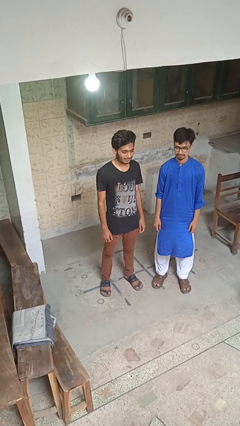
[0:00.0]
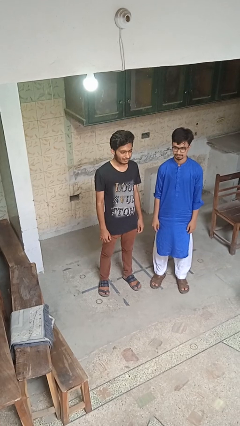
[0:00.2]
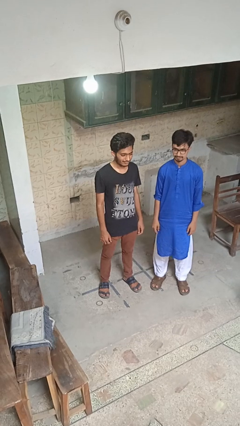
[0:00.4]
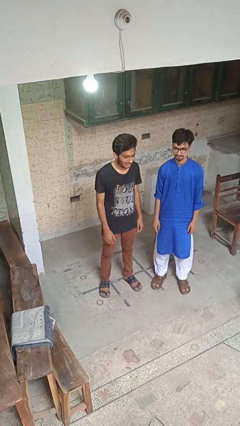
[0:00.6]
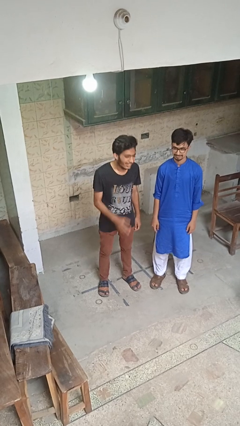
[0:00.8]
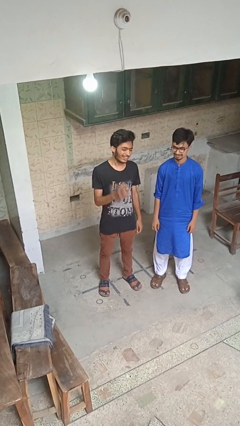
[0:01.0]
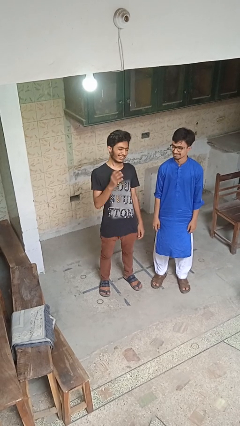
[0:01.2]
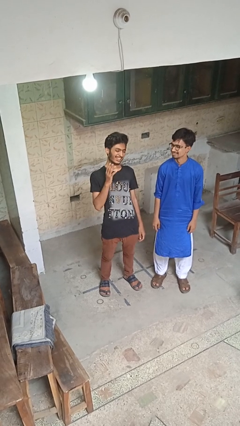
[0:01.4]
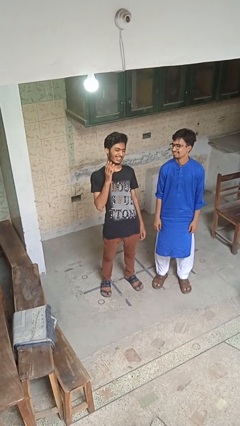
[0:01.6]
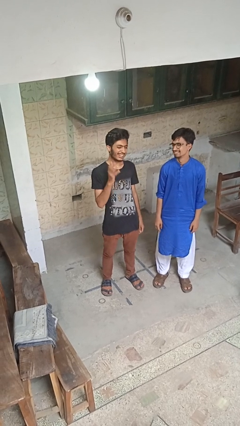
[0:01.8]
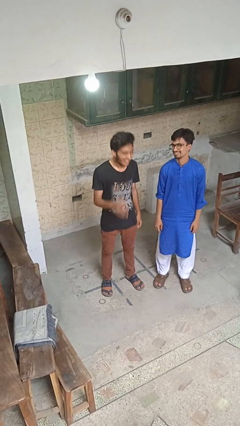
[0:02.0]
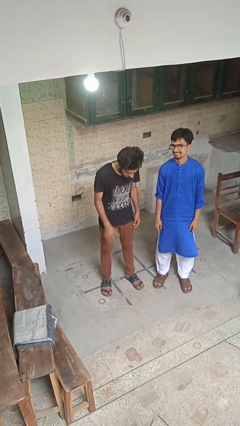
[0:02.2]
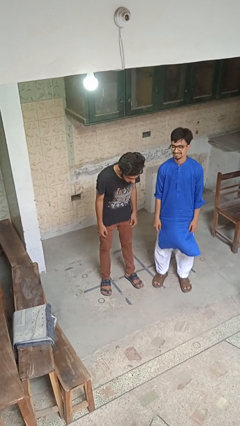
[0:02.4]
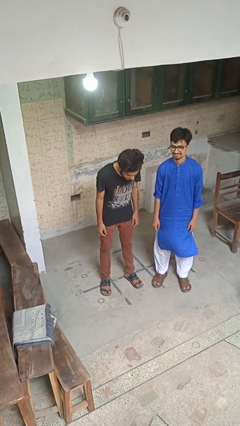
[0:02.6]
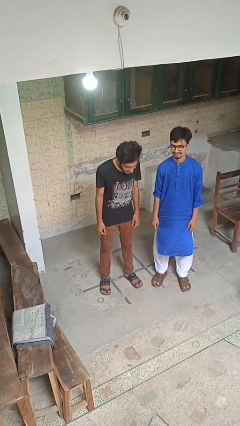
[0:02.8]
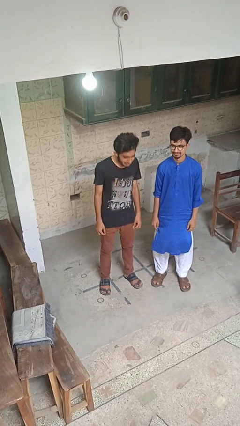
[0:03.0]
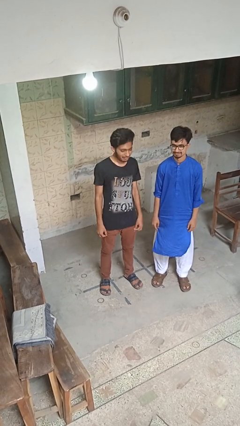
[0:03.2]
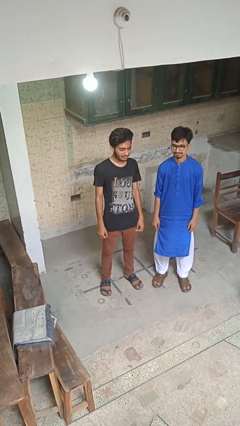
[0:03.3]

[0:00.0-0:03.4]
person laughs with person

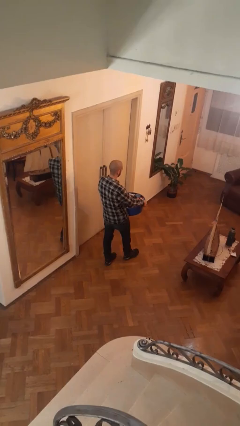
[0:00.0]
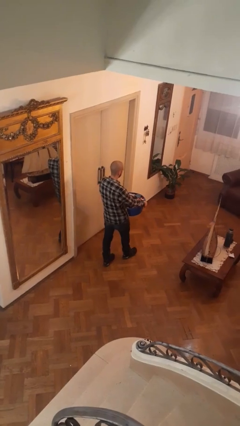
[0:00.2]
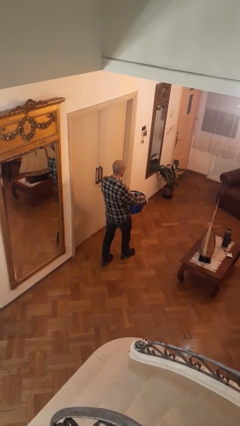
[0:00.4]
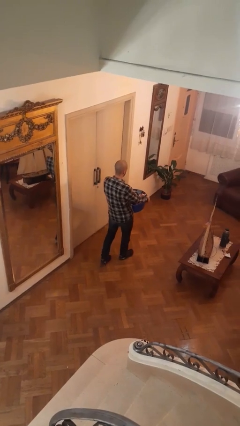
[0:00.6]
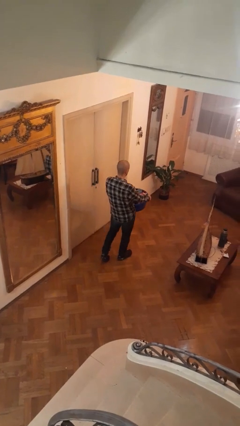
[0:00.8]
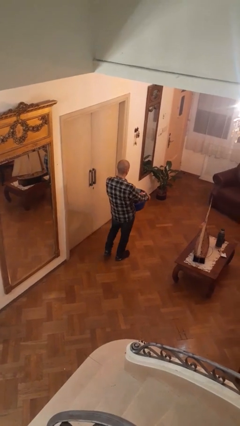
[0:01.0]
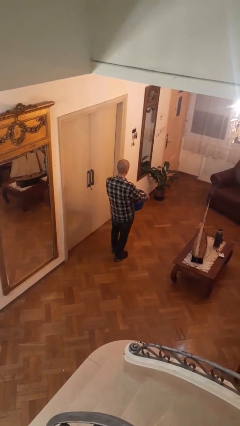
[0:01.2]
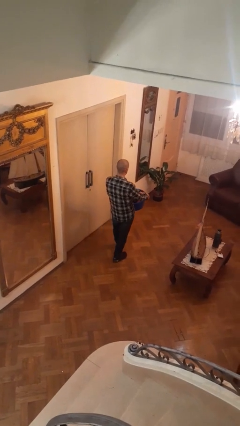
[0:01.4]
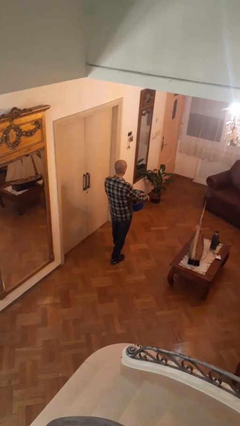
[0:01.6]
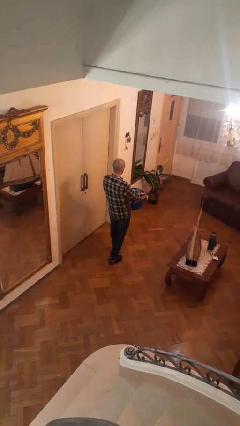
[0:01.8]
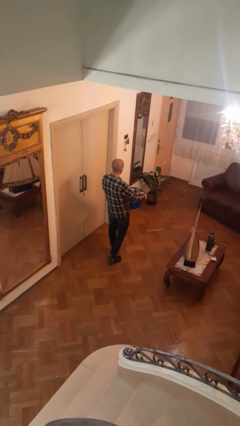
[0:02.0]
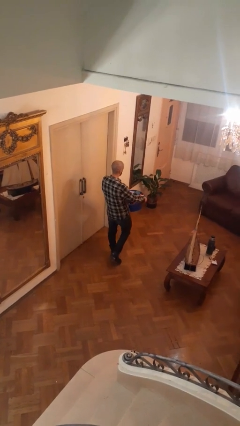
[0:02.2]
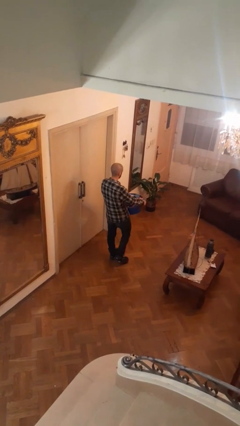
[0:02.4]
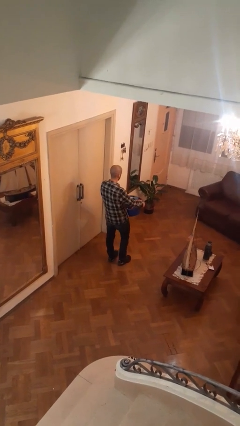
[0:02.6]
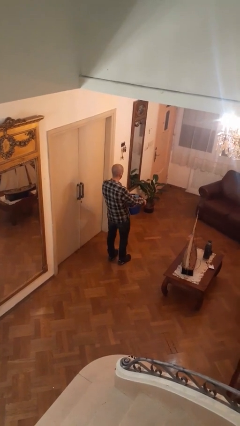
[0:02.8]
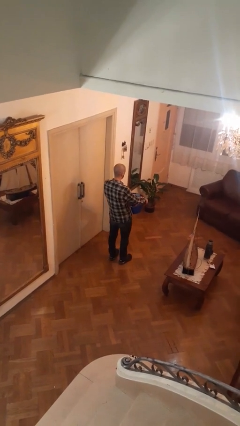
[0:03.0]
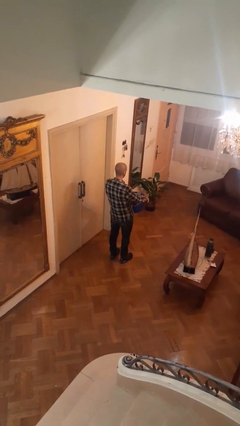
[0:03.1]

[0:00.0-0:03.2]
person carries laundry basket

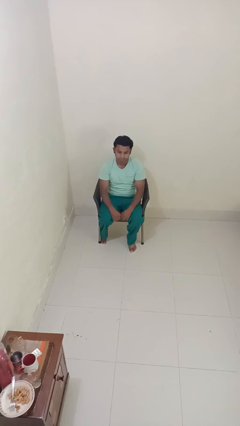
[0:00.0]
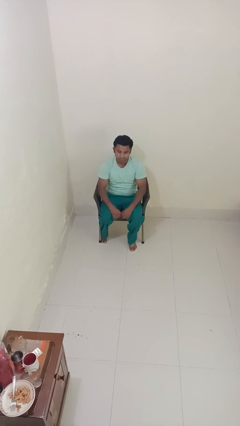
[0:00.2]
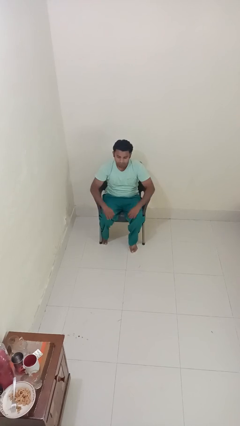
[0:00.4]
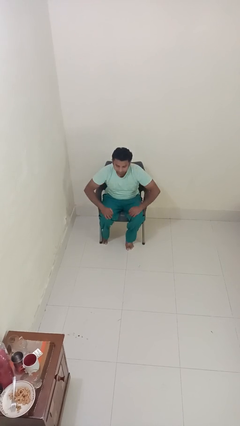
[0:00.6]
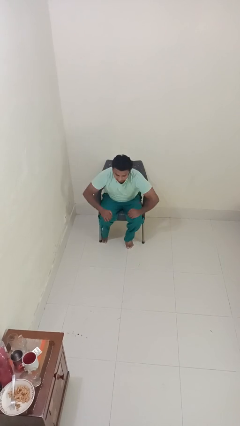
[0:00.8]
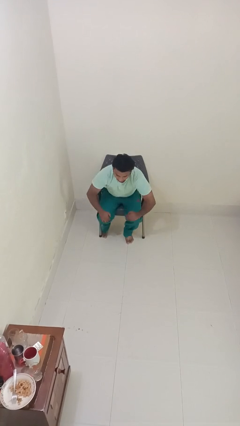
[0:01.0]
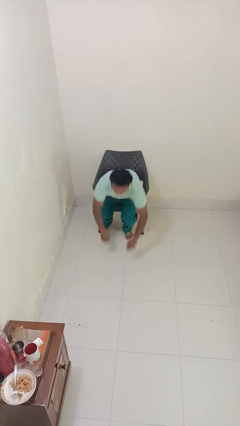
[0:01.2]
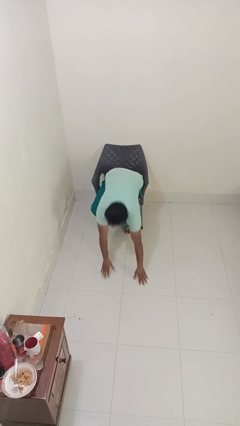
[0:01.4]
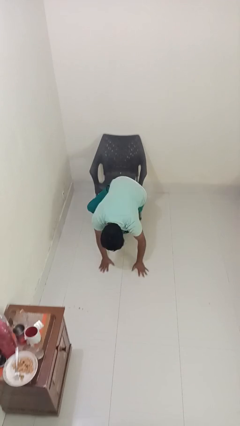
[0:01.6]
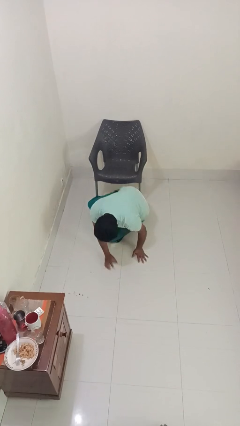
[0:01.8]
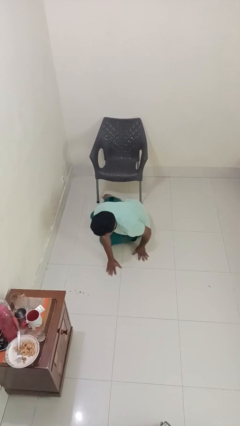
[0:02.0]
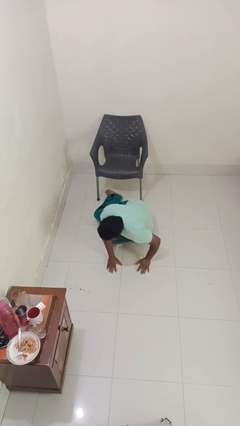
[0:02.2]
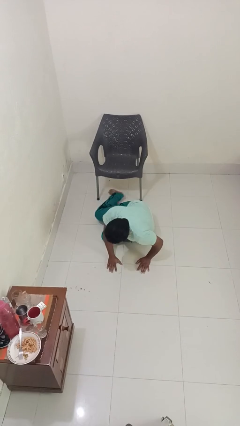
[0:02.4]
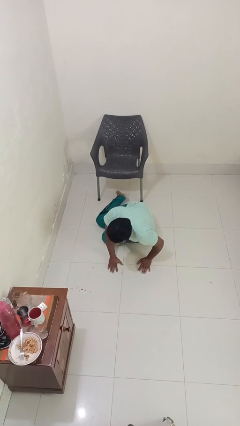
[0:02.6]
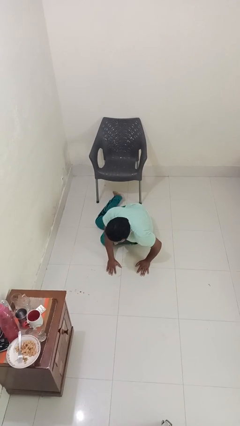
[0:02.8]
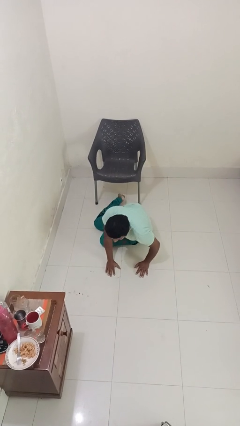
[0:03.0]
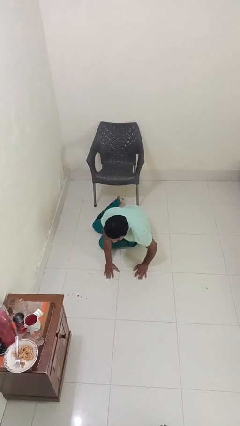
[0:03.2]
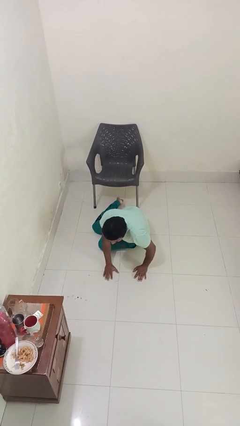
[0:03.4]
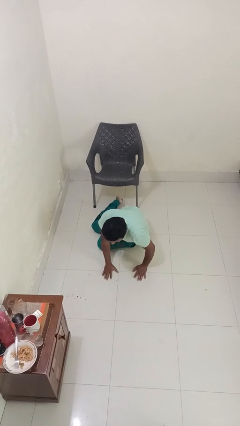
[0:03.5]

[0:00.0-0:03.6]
person falls from chair

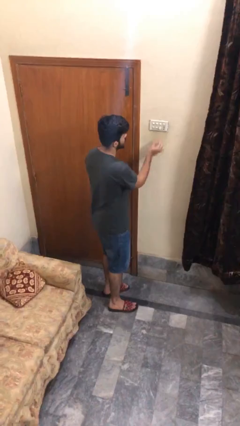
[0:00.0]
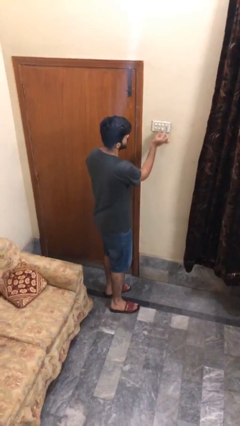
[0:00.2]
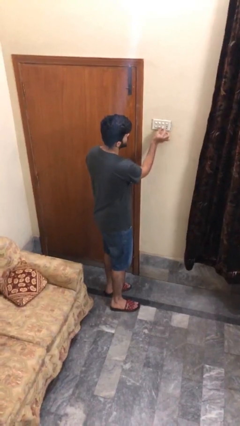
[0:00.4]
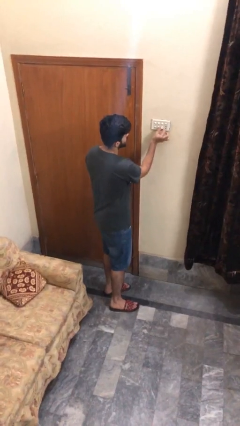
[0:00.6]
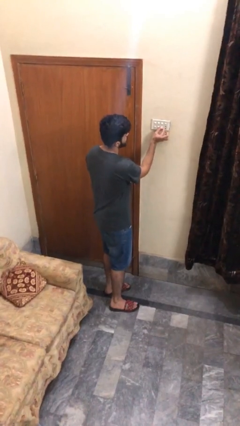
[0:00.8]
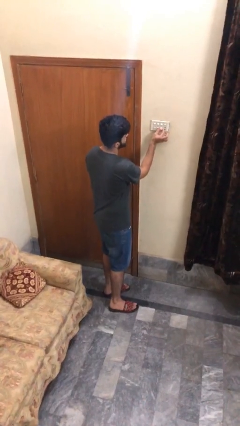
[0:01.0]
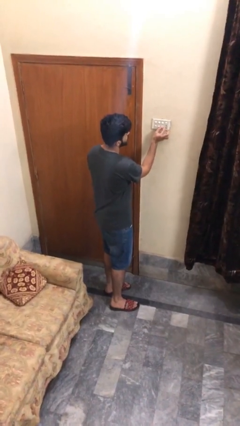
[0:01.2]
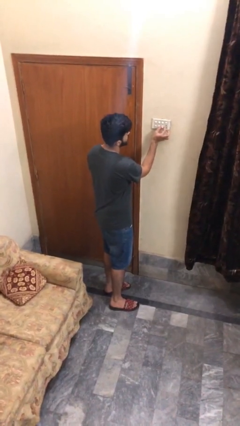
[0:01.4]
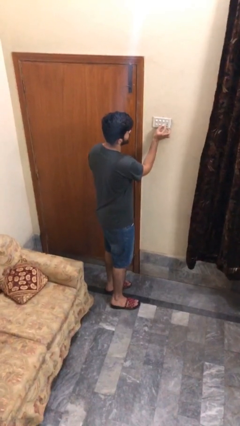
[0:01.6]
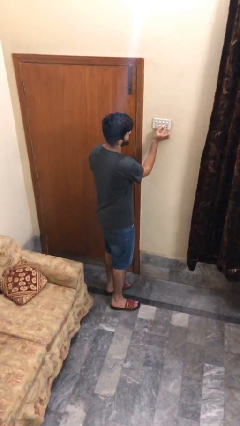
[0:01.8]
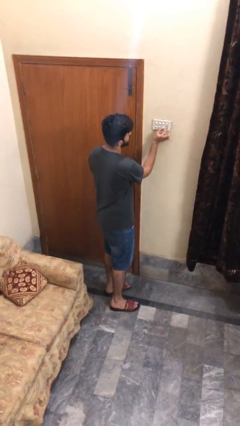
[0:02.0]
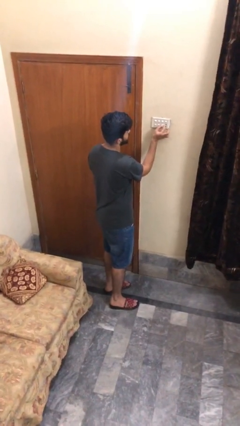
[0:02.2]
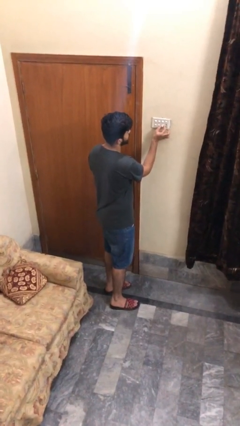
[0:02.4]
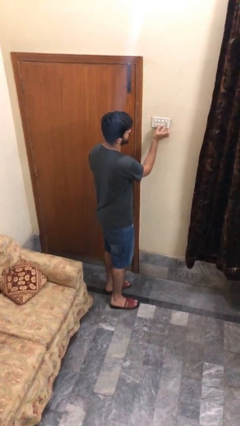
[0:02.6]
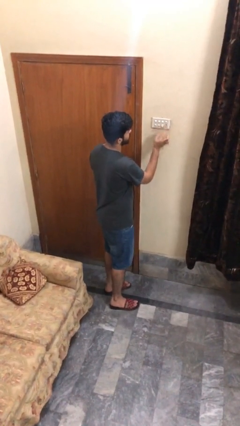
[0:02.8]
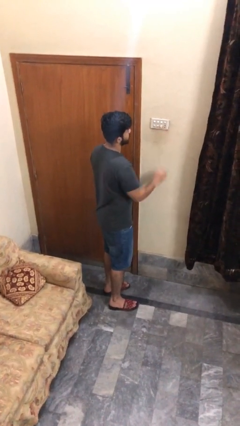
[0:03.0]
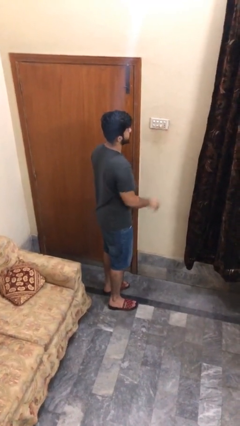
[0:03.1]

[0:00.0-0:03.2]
person adjusts thermostat

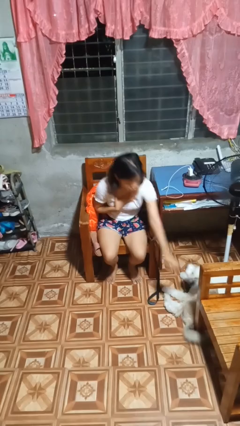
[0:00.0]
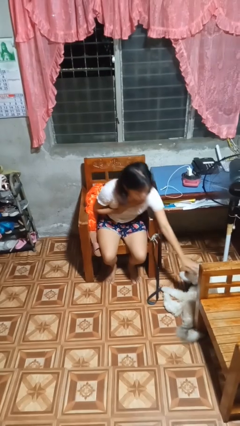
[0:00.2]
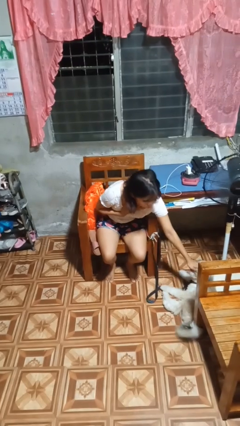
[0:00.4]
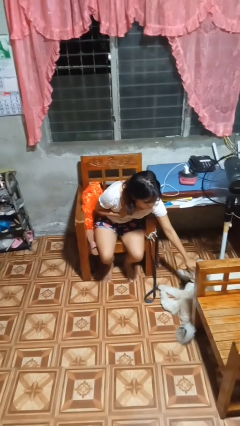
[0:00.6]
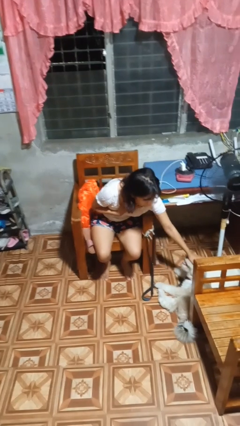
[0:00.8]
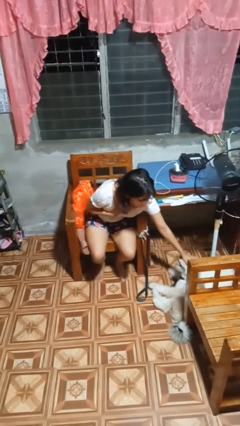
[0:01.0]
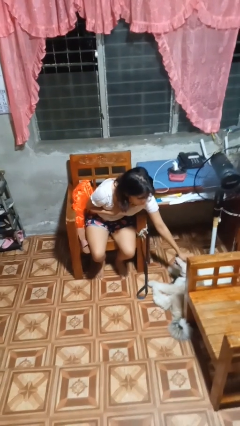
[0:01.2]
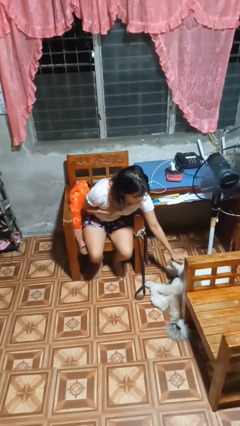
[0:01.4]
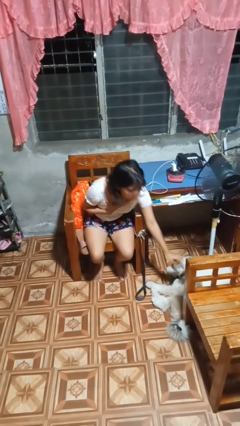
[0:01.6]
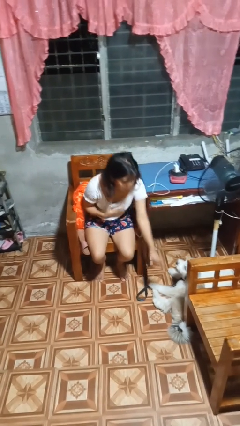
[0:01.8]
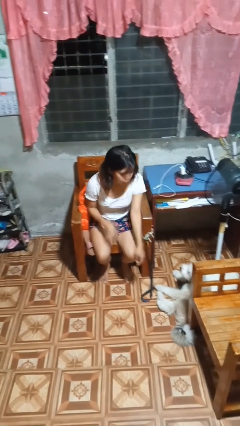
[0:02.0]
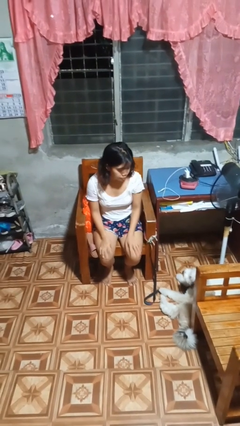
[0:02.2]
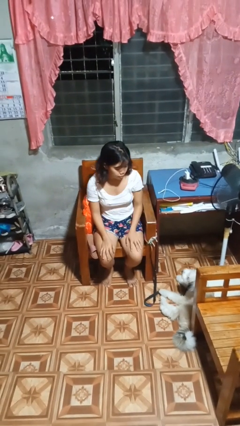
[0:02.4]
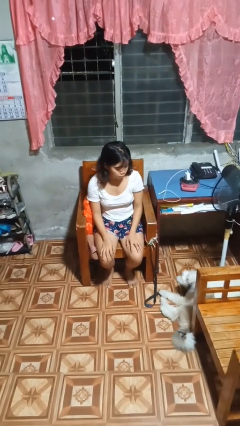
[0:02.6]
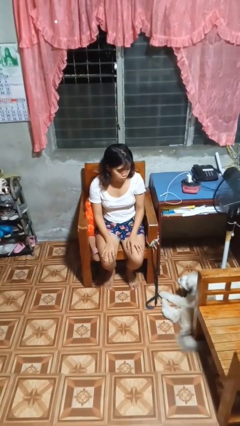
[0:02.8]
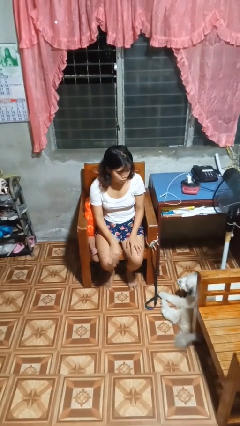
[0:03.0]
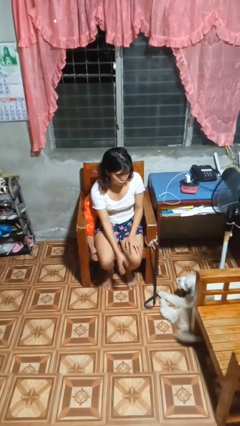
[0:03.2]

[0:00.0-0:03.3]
person pets dog

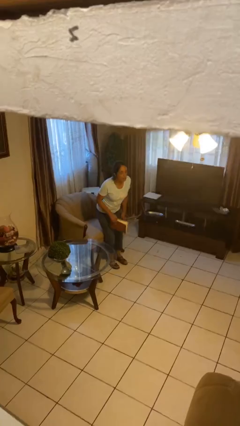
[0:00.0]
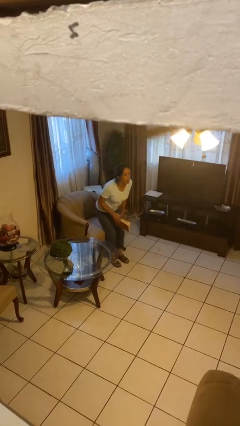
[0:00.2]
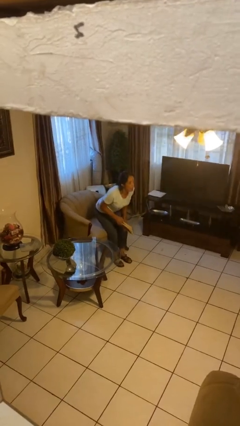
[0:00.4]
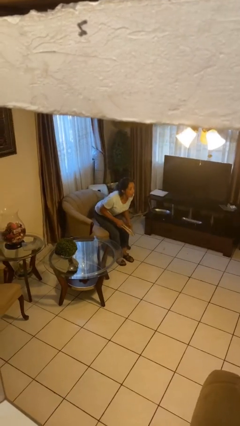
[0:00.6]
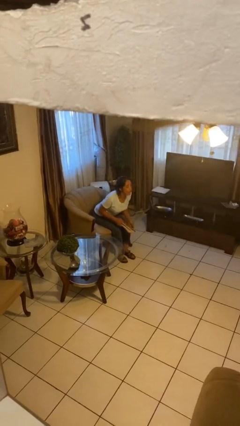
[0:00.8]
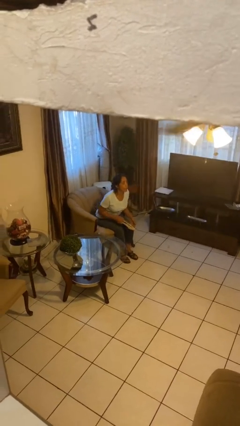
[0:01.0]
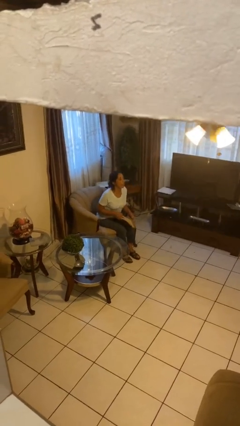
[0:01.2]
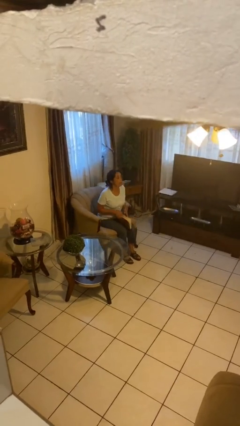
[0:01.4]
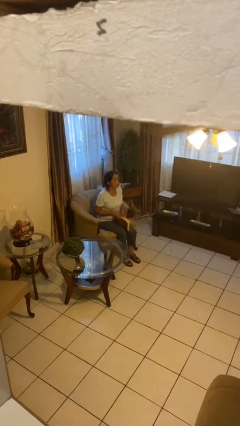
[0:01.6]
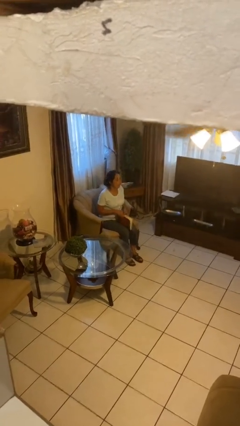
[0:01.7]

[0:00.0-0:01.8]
person sits down
